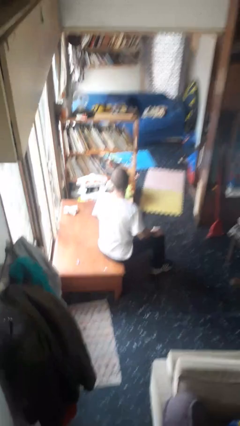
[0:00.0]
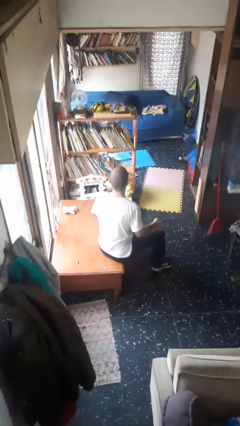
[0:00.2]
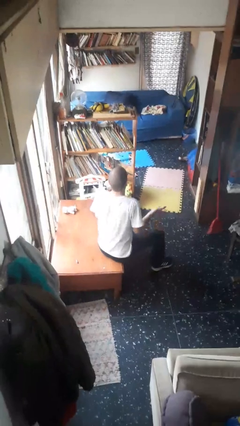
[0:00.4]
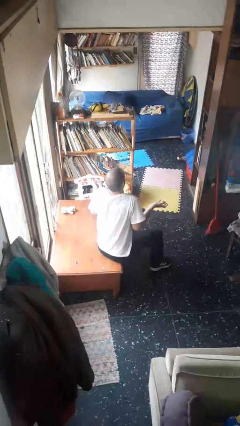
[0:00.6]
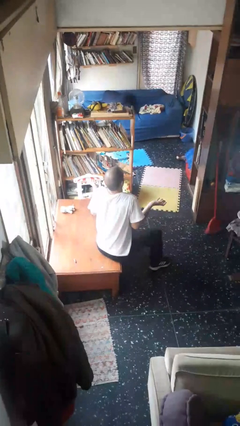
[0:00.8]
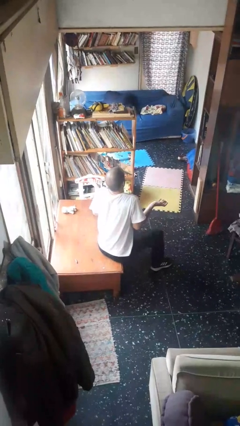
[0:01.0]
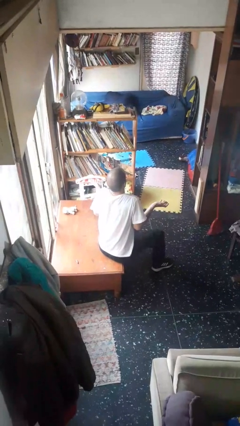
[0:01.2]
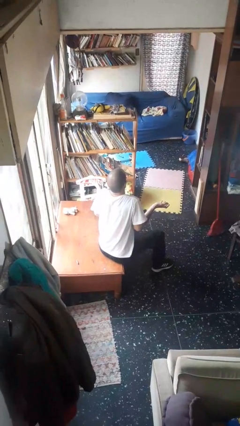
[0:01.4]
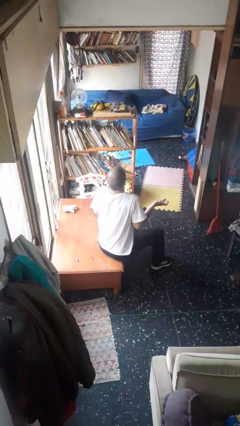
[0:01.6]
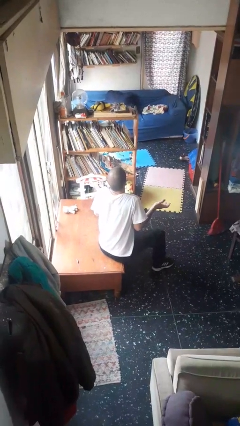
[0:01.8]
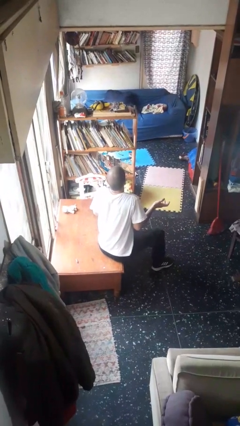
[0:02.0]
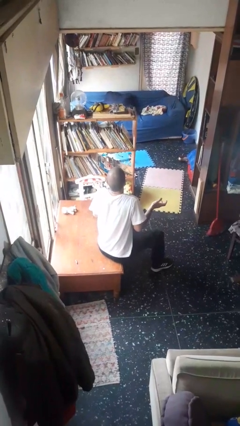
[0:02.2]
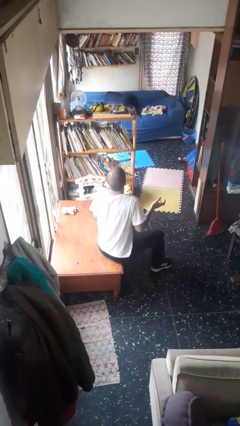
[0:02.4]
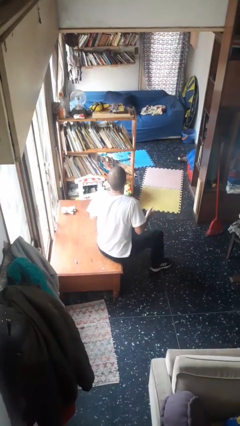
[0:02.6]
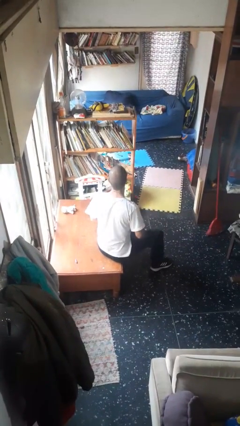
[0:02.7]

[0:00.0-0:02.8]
person shrugs

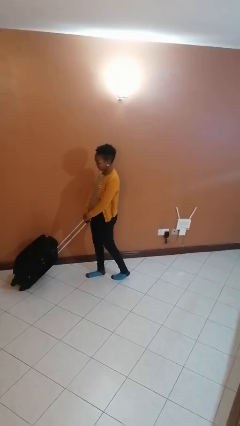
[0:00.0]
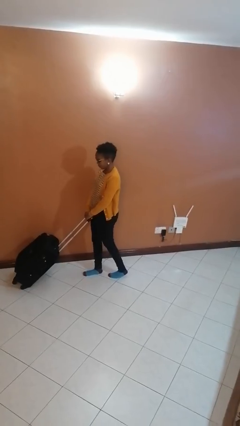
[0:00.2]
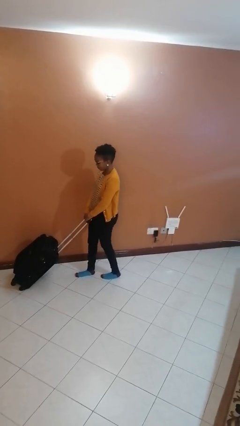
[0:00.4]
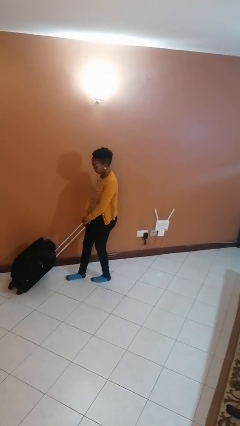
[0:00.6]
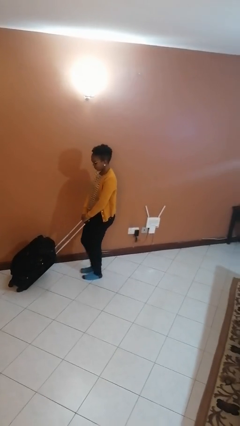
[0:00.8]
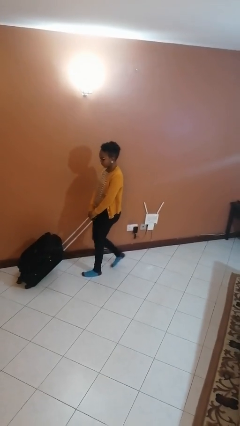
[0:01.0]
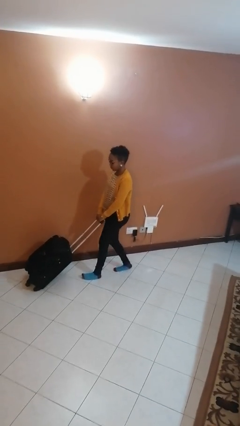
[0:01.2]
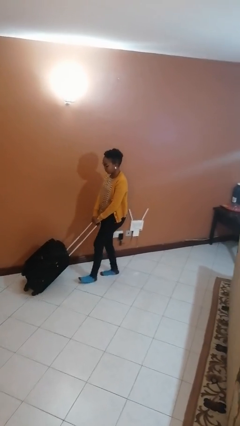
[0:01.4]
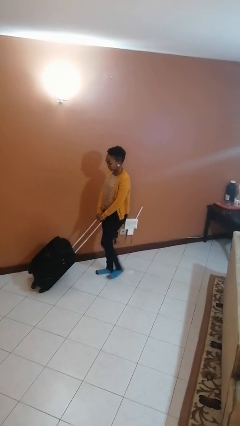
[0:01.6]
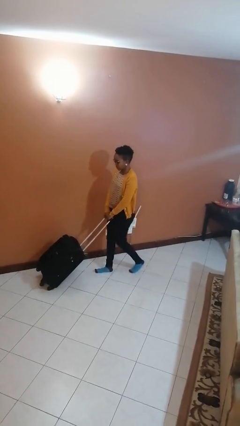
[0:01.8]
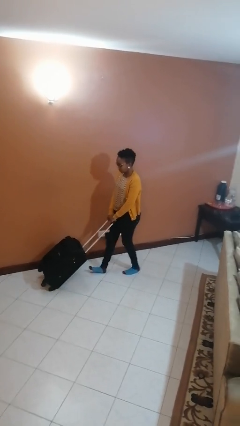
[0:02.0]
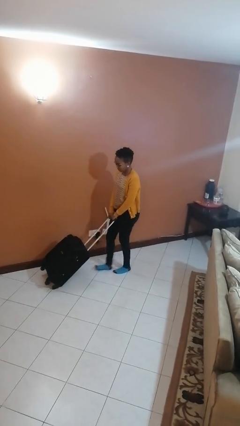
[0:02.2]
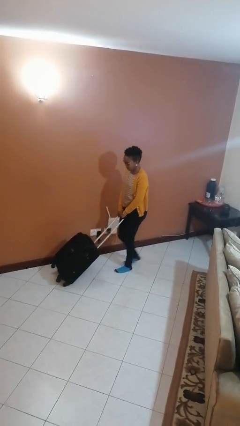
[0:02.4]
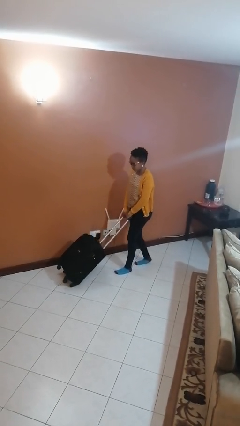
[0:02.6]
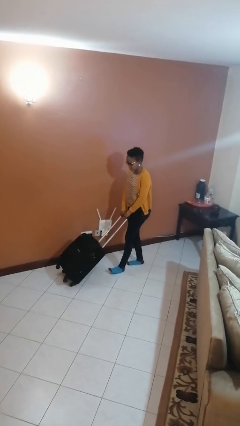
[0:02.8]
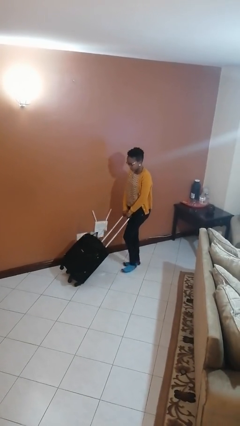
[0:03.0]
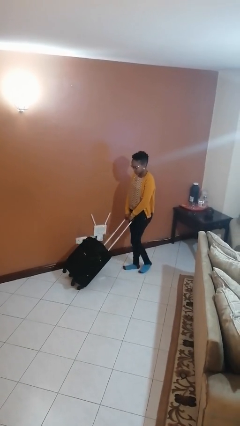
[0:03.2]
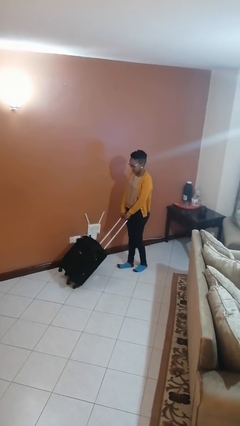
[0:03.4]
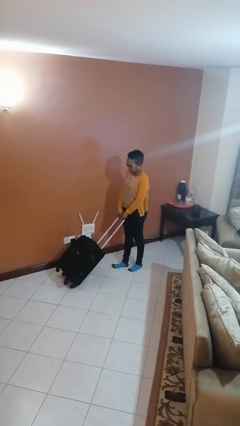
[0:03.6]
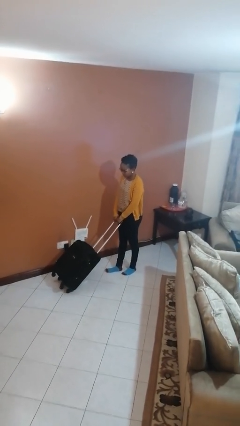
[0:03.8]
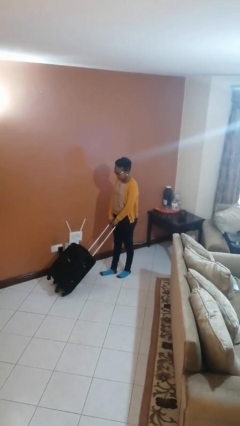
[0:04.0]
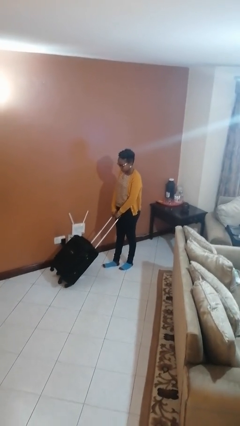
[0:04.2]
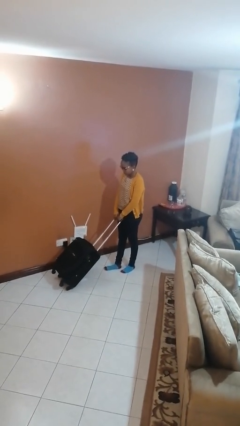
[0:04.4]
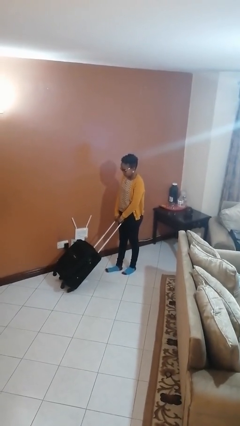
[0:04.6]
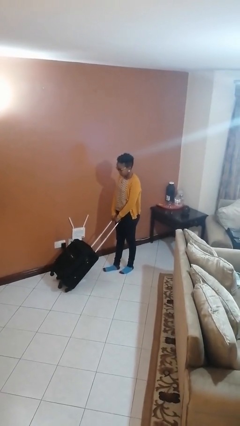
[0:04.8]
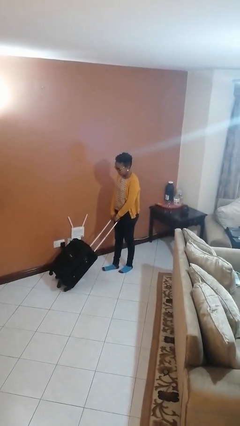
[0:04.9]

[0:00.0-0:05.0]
person pulls wheeled cart

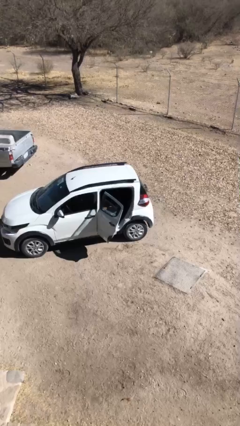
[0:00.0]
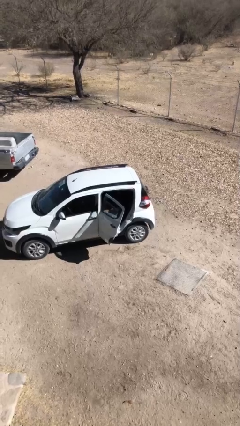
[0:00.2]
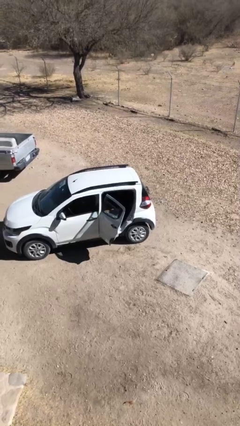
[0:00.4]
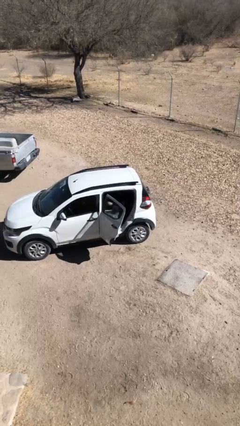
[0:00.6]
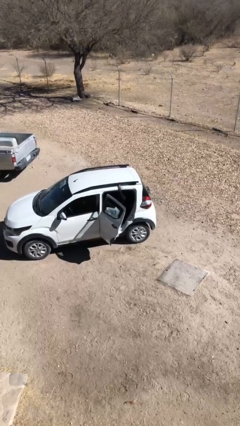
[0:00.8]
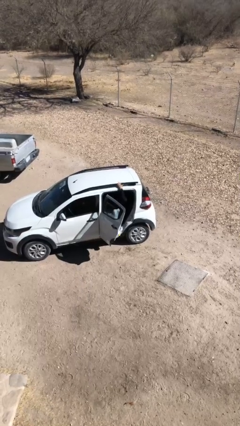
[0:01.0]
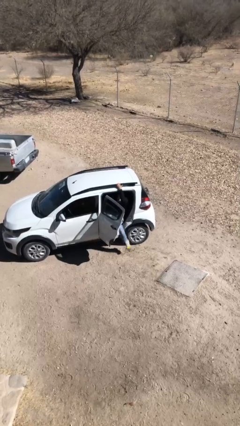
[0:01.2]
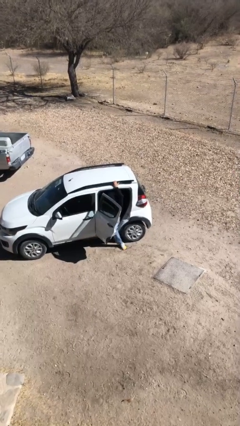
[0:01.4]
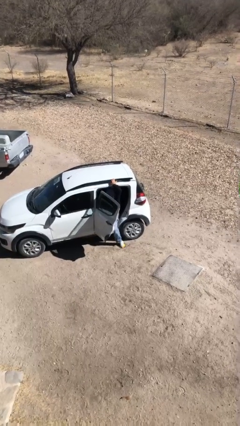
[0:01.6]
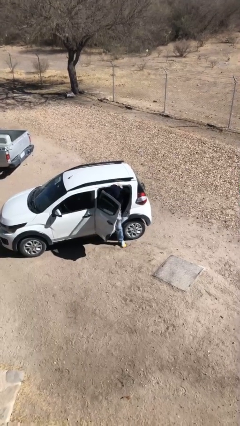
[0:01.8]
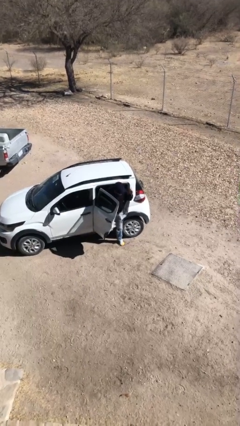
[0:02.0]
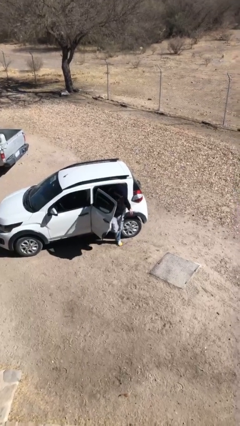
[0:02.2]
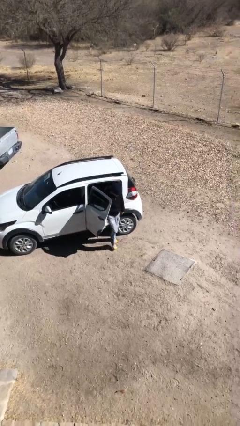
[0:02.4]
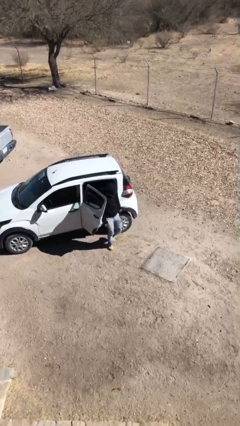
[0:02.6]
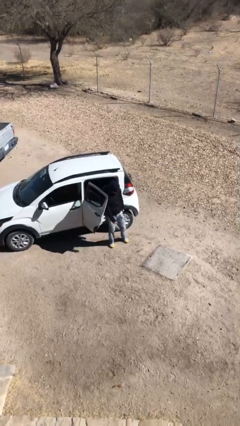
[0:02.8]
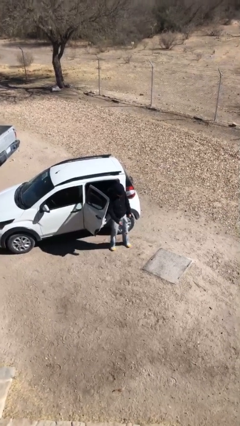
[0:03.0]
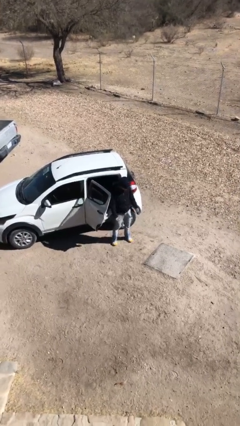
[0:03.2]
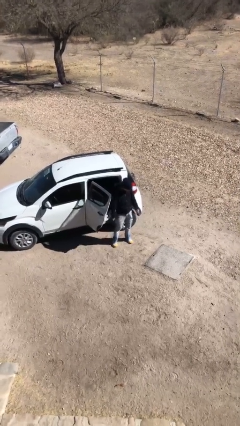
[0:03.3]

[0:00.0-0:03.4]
person exits car

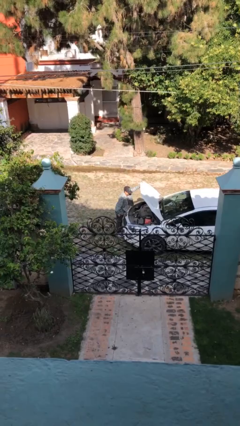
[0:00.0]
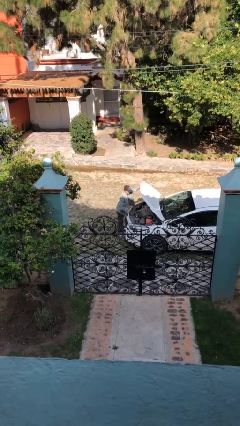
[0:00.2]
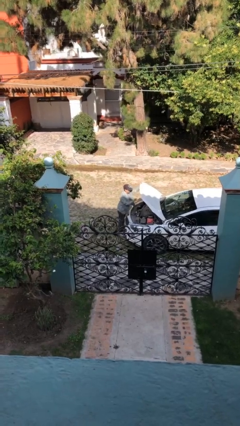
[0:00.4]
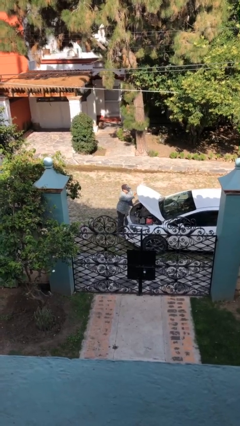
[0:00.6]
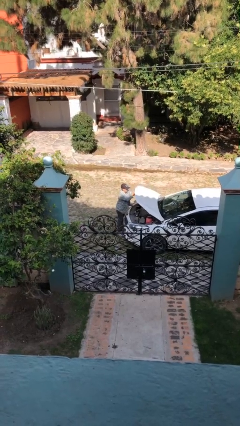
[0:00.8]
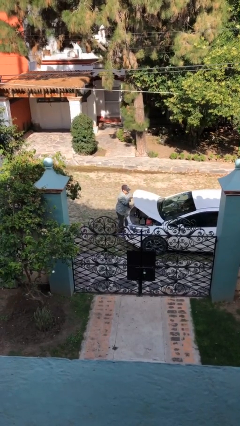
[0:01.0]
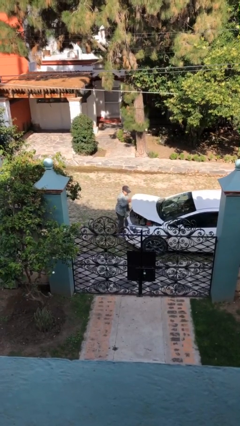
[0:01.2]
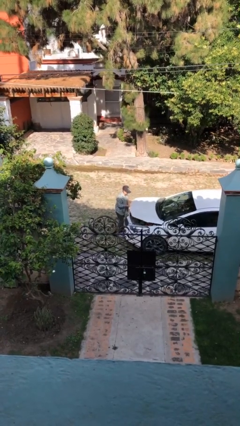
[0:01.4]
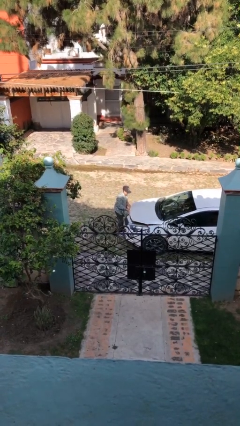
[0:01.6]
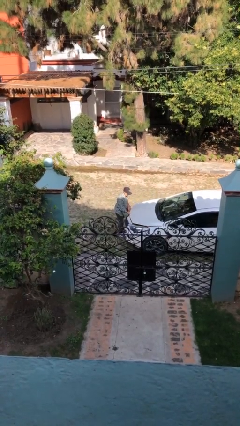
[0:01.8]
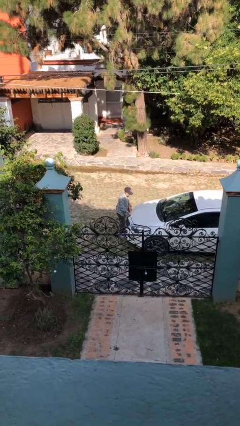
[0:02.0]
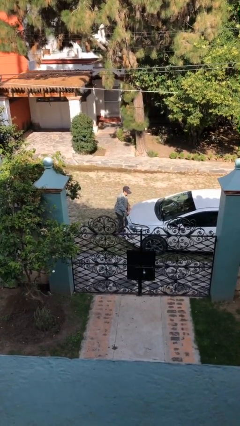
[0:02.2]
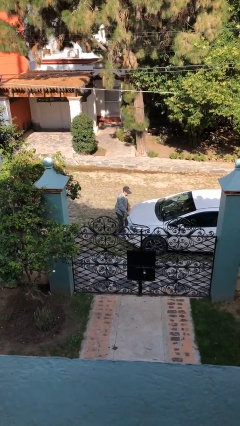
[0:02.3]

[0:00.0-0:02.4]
person closes car hood

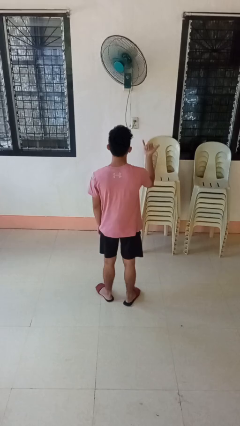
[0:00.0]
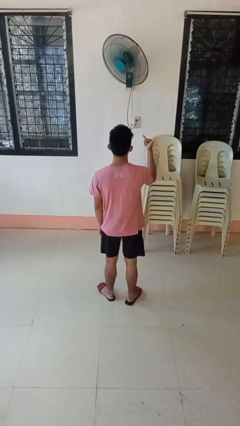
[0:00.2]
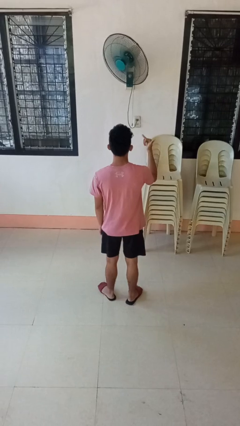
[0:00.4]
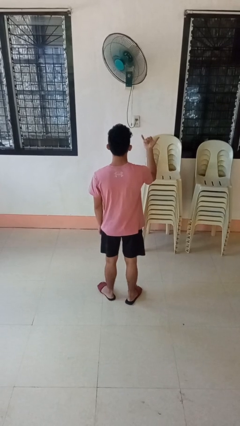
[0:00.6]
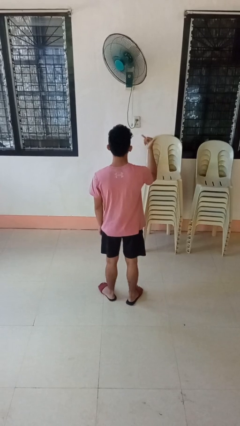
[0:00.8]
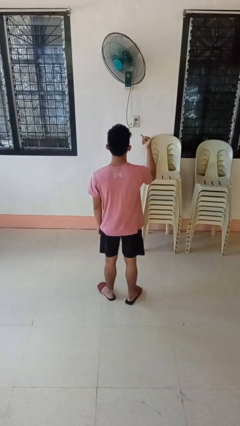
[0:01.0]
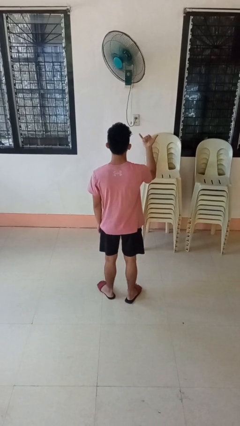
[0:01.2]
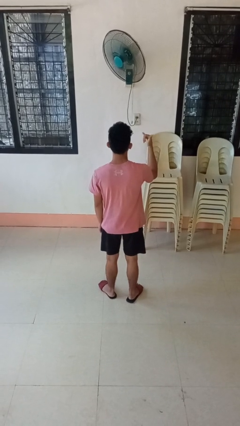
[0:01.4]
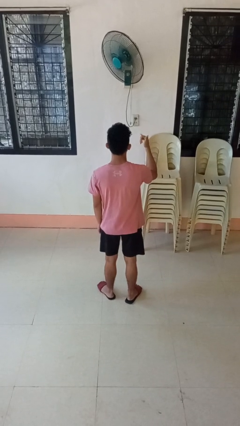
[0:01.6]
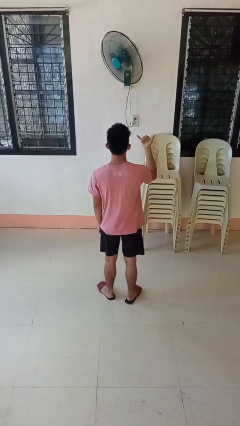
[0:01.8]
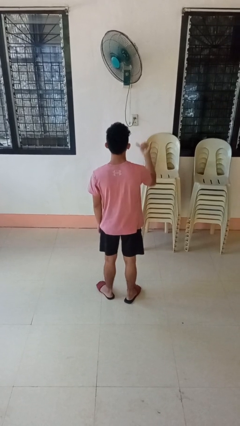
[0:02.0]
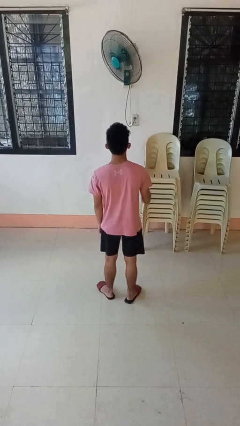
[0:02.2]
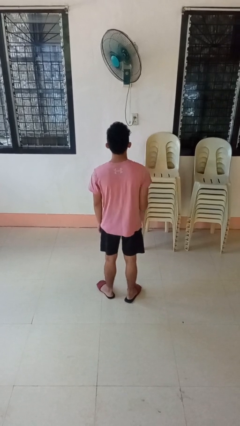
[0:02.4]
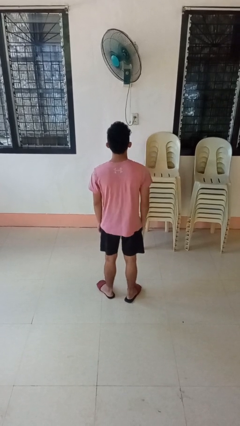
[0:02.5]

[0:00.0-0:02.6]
person gestures hang loose

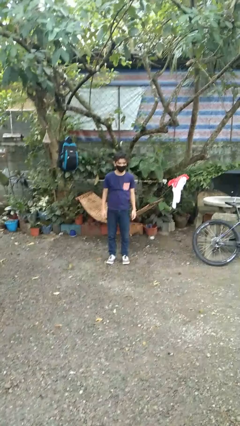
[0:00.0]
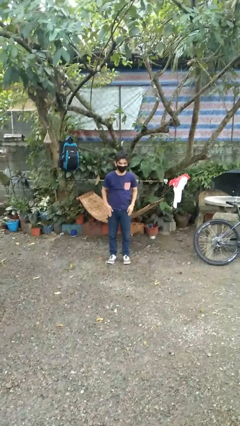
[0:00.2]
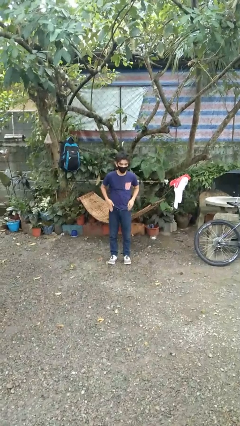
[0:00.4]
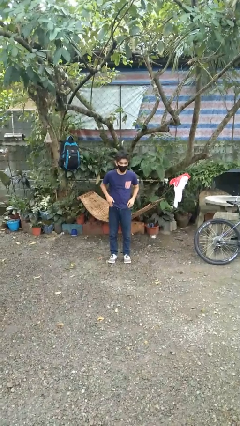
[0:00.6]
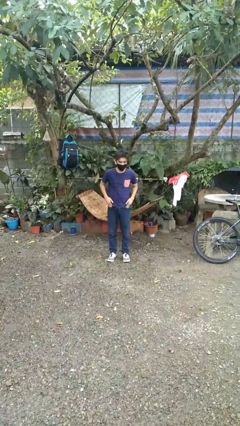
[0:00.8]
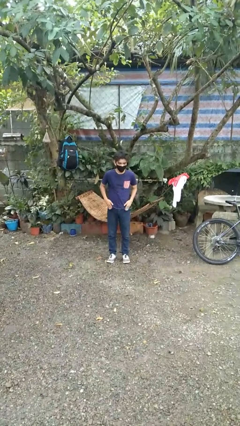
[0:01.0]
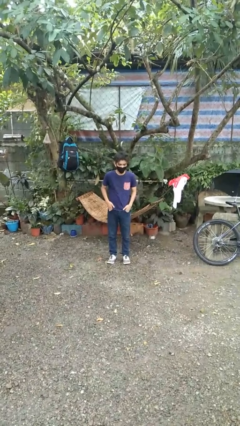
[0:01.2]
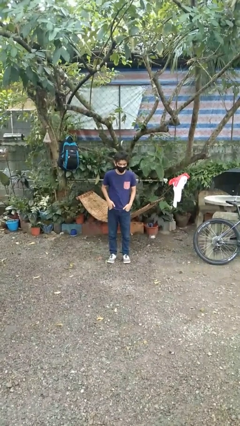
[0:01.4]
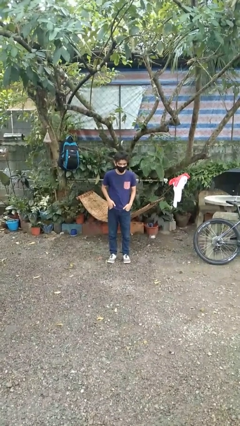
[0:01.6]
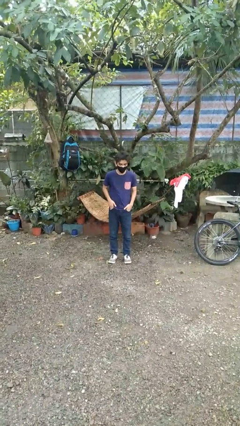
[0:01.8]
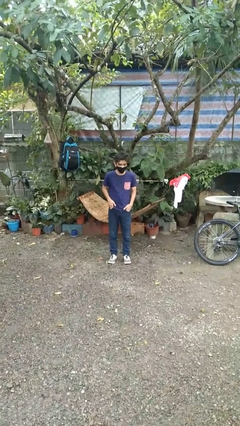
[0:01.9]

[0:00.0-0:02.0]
person puts hands in back pockets
